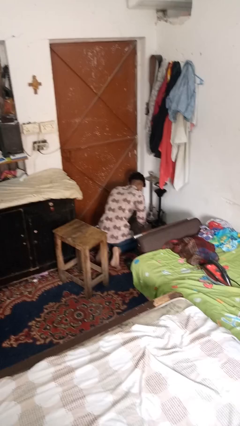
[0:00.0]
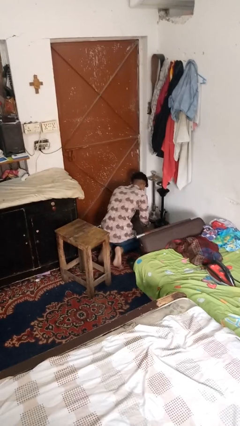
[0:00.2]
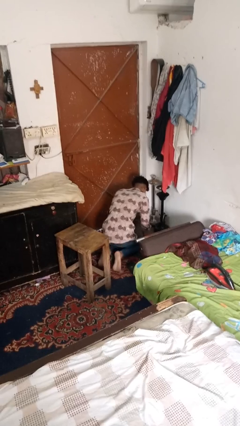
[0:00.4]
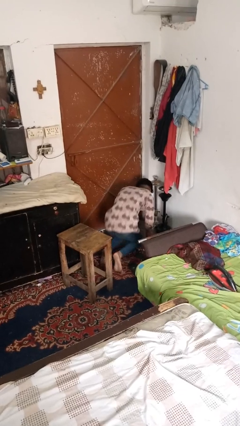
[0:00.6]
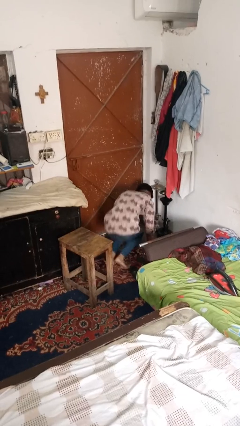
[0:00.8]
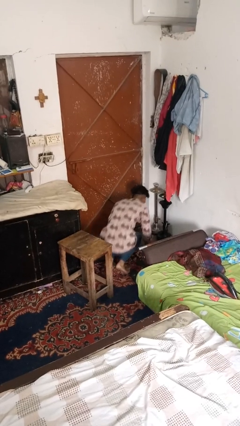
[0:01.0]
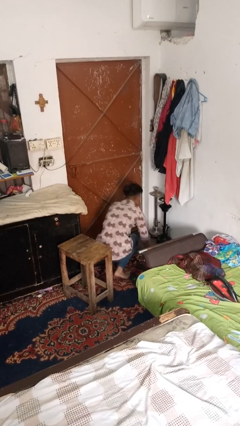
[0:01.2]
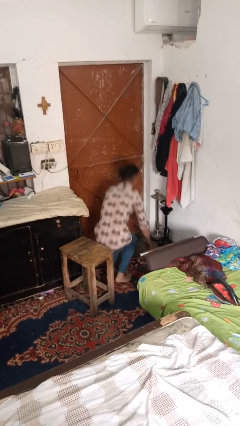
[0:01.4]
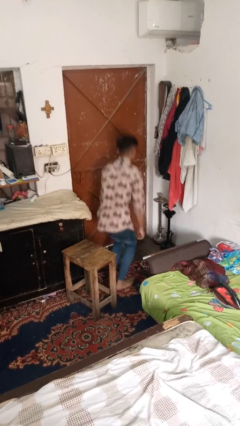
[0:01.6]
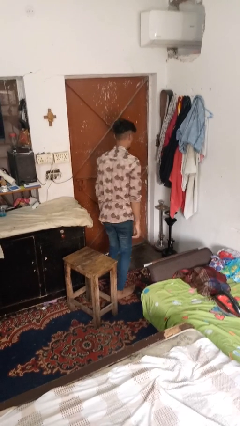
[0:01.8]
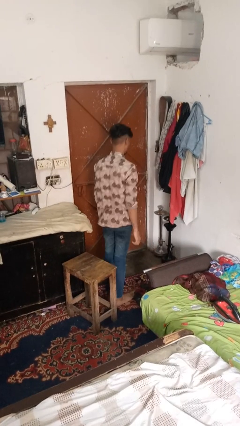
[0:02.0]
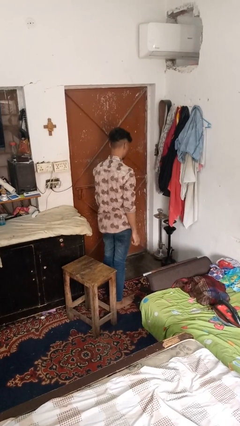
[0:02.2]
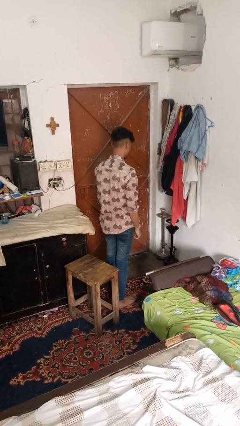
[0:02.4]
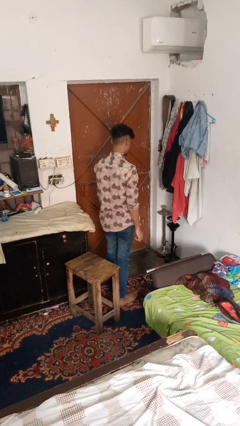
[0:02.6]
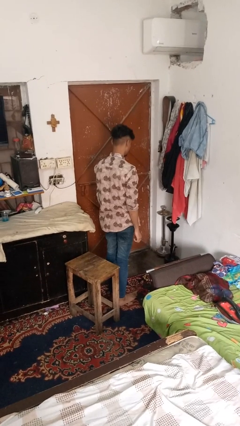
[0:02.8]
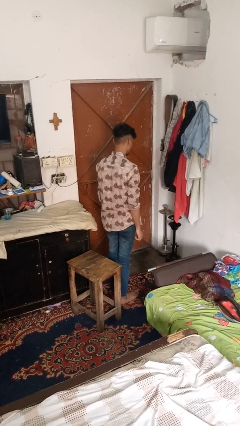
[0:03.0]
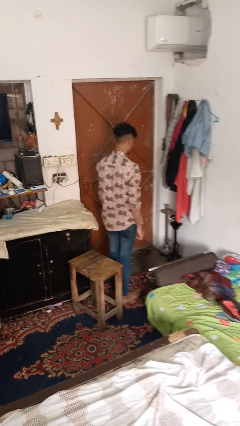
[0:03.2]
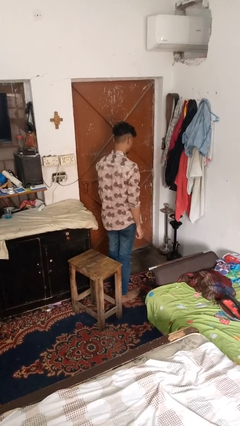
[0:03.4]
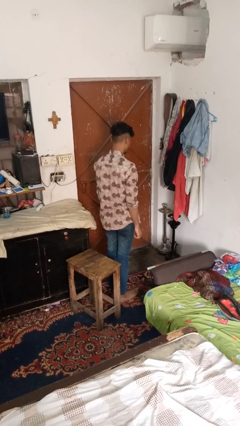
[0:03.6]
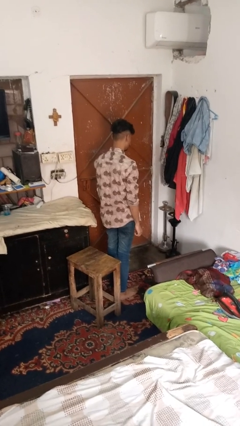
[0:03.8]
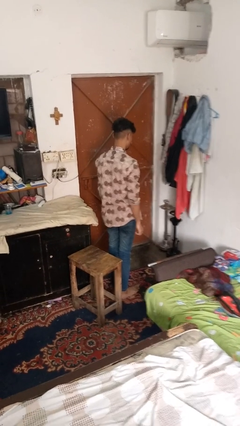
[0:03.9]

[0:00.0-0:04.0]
person stands up from floor

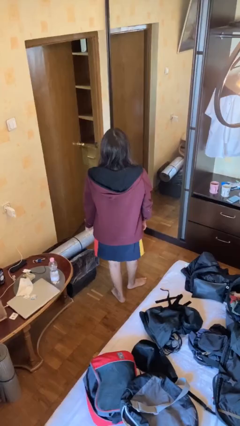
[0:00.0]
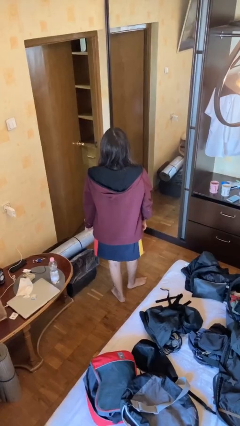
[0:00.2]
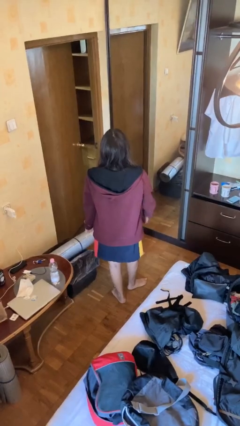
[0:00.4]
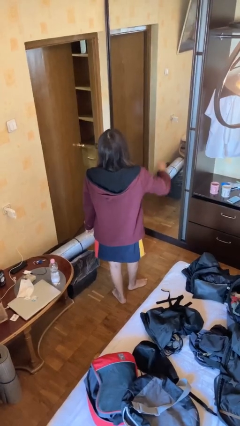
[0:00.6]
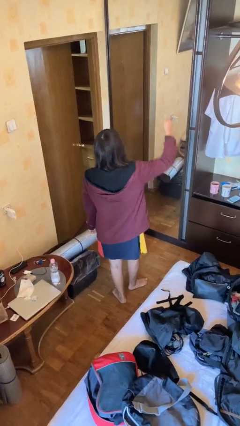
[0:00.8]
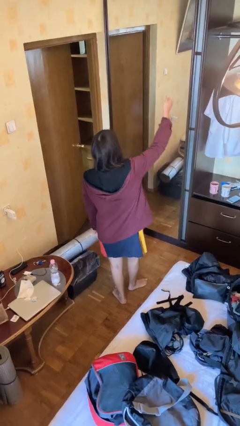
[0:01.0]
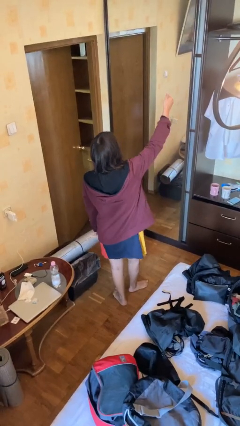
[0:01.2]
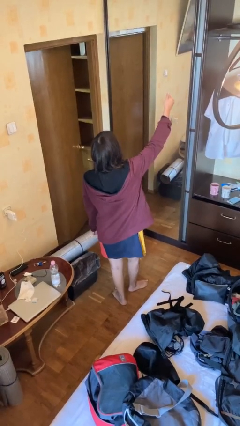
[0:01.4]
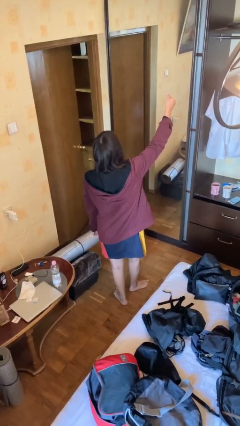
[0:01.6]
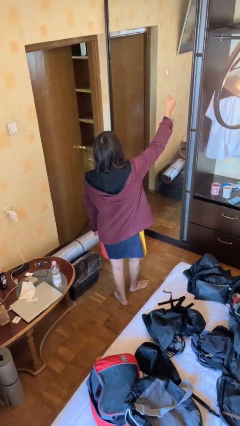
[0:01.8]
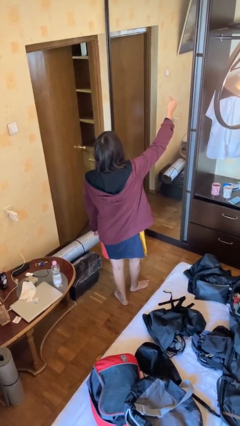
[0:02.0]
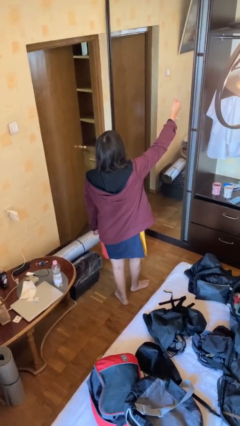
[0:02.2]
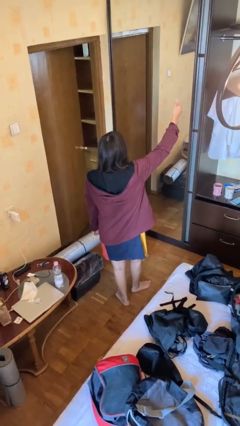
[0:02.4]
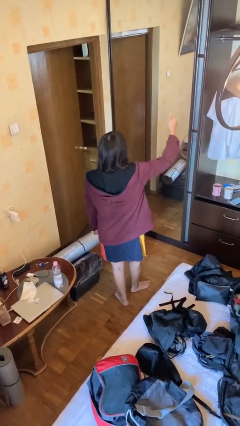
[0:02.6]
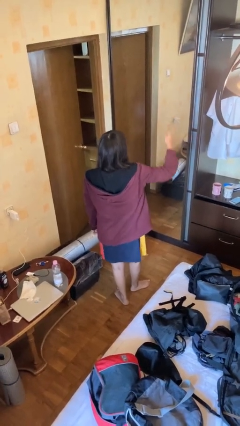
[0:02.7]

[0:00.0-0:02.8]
person gestures thumbs up

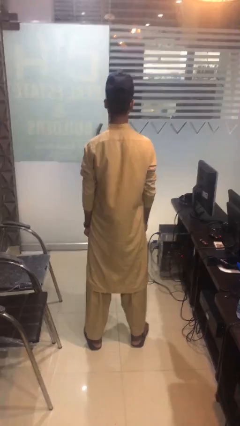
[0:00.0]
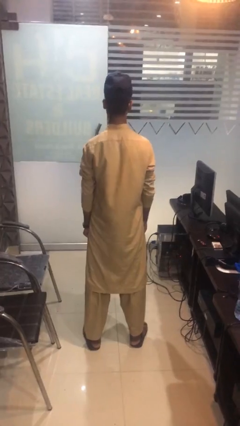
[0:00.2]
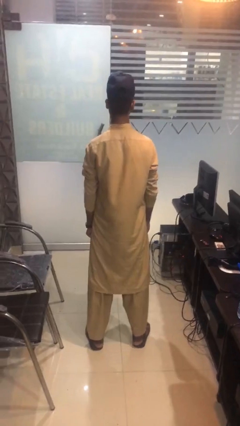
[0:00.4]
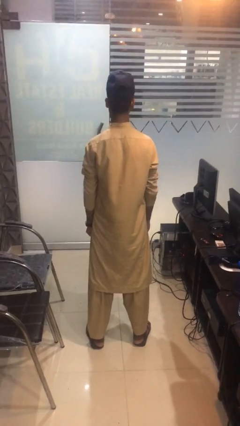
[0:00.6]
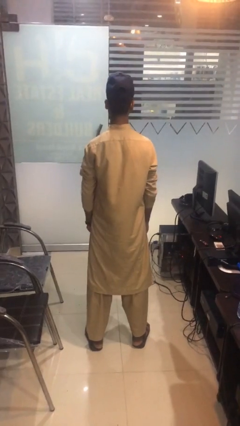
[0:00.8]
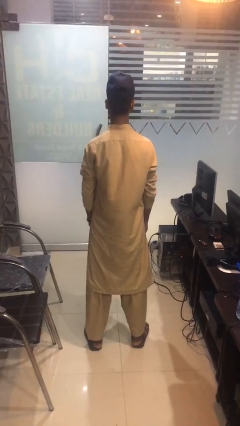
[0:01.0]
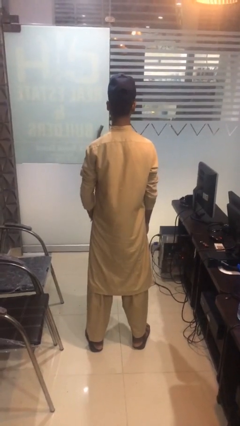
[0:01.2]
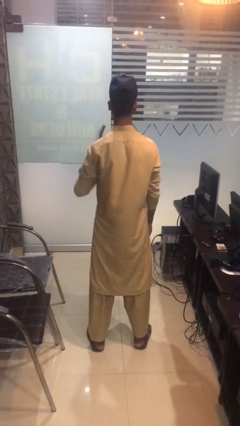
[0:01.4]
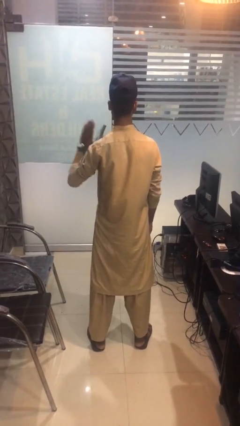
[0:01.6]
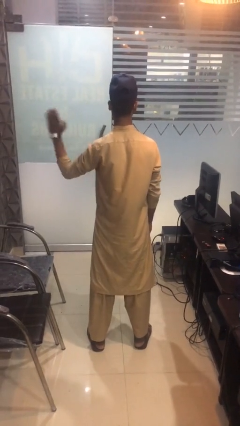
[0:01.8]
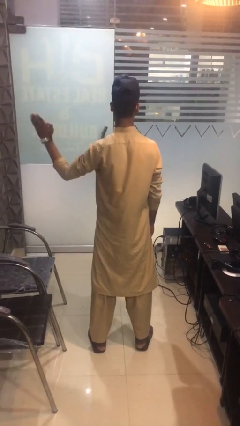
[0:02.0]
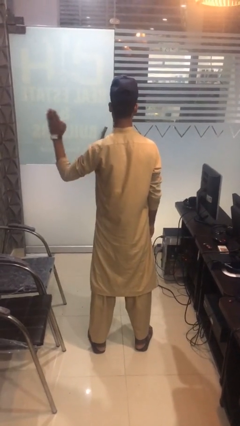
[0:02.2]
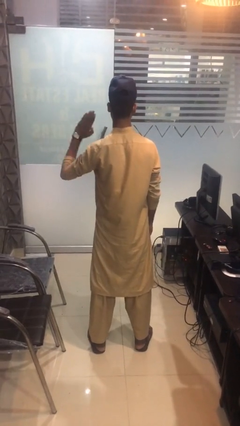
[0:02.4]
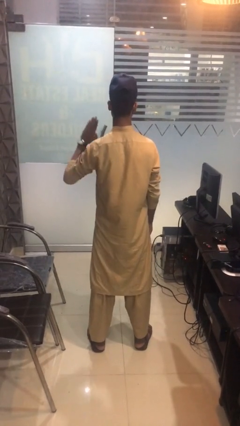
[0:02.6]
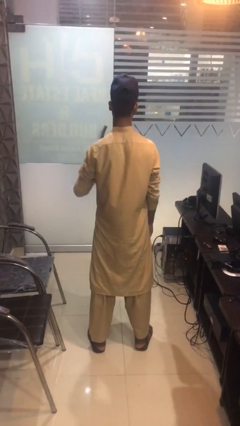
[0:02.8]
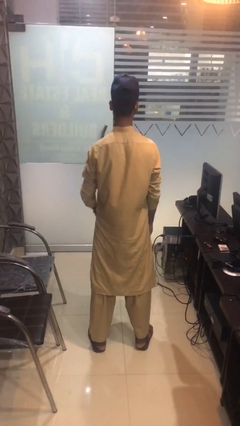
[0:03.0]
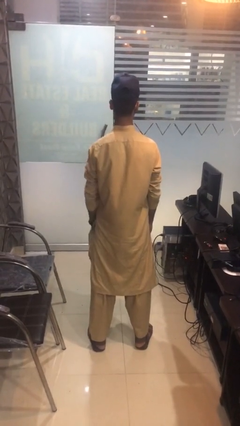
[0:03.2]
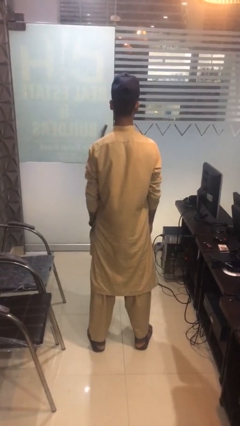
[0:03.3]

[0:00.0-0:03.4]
person gestures swipe left

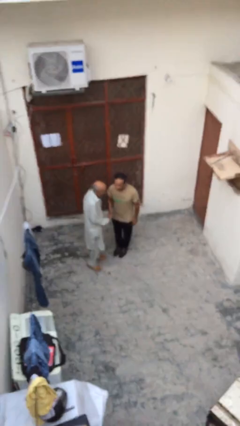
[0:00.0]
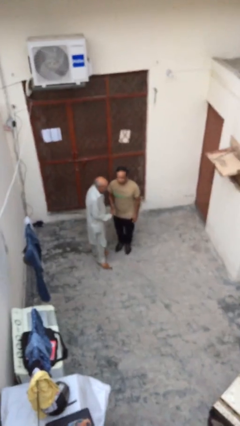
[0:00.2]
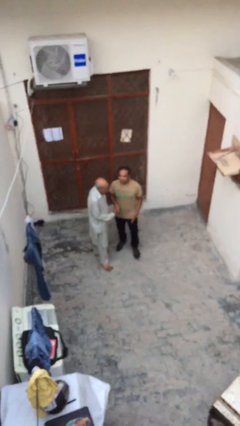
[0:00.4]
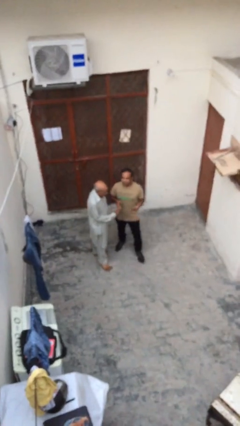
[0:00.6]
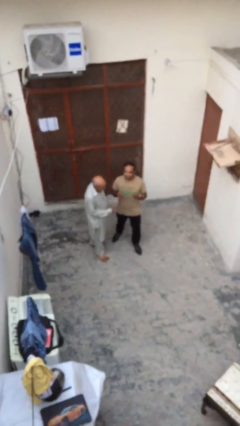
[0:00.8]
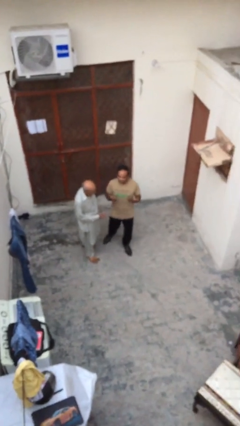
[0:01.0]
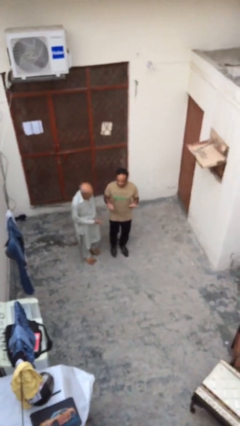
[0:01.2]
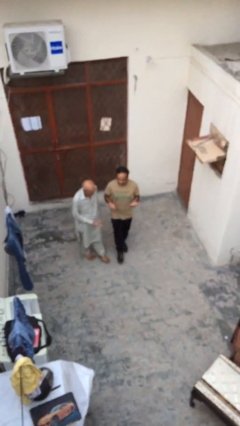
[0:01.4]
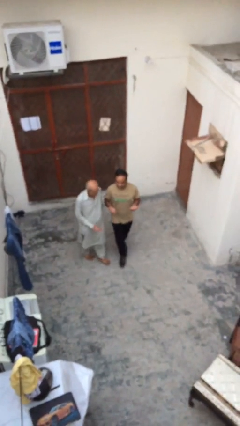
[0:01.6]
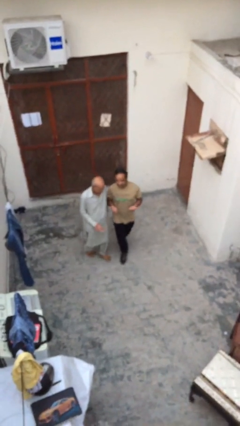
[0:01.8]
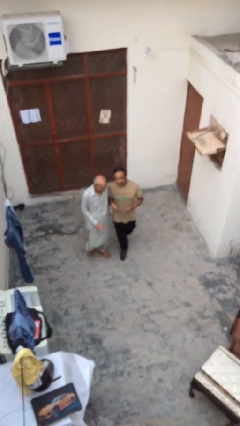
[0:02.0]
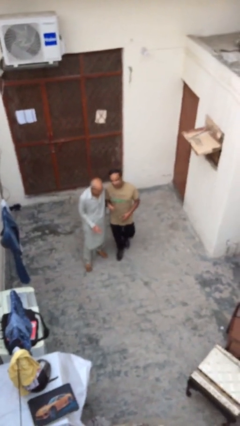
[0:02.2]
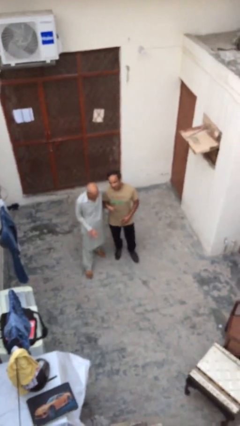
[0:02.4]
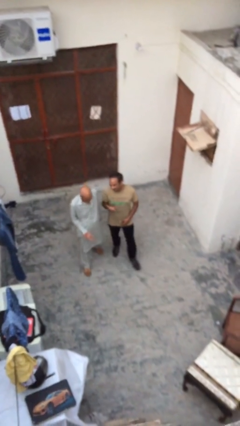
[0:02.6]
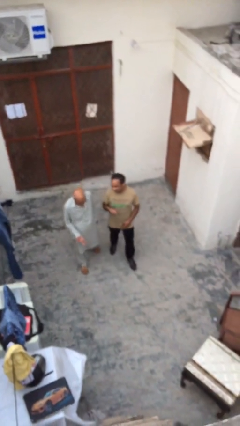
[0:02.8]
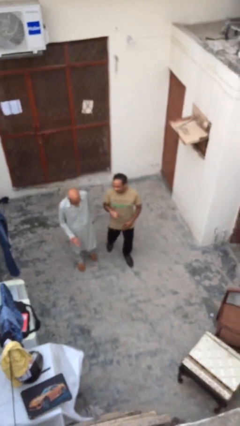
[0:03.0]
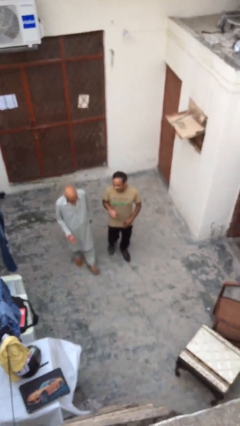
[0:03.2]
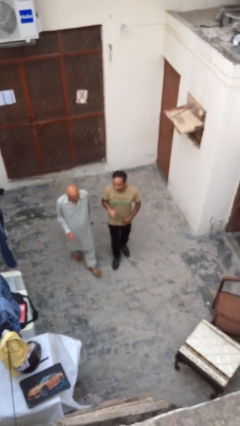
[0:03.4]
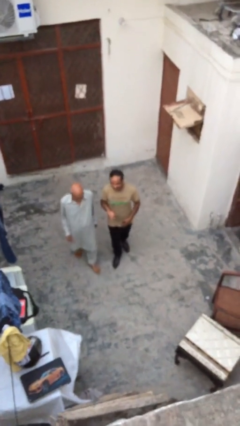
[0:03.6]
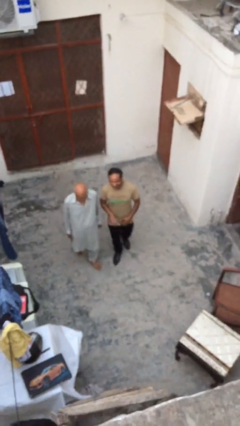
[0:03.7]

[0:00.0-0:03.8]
person talks to person

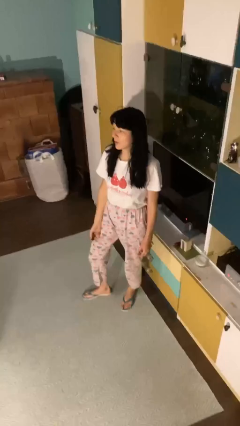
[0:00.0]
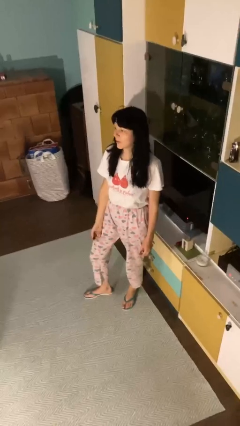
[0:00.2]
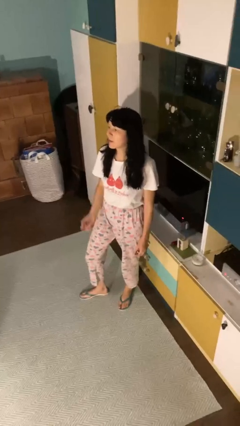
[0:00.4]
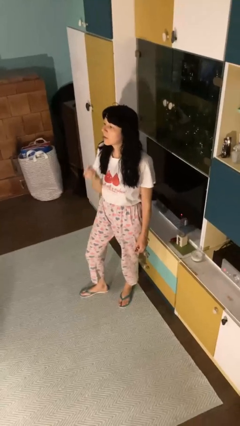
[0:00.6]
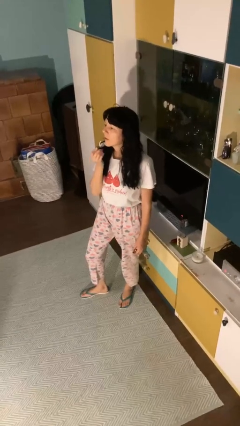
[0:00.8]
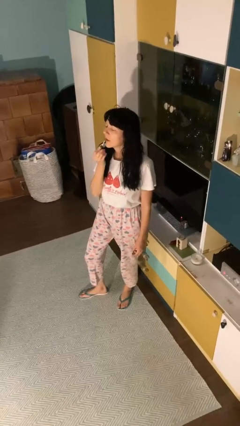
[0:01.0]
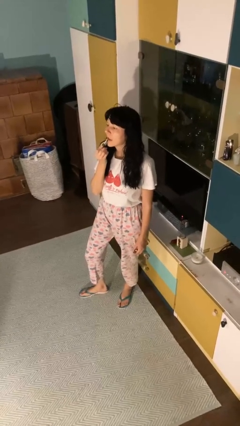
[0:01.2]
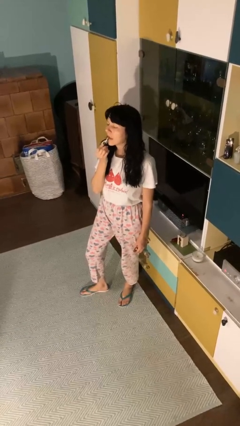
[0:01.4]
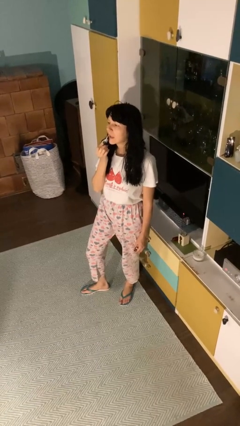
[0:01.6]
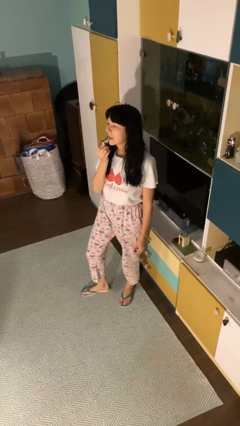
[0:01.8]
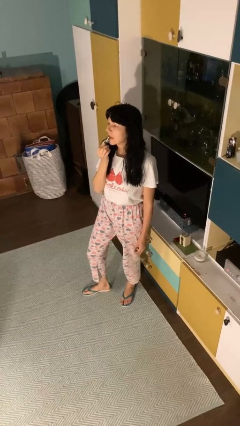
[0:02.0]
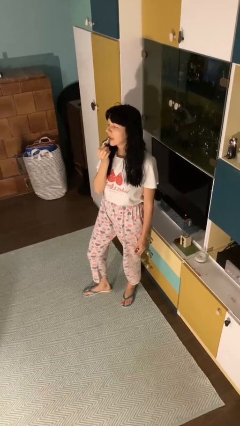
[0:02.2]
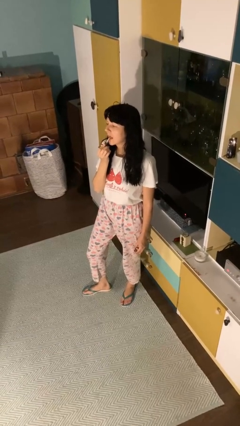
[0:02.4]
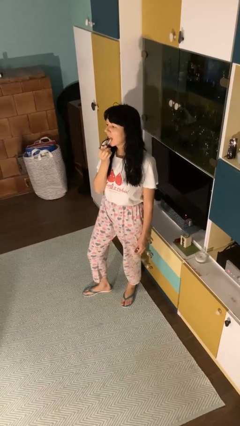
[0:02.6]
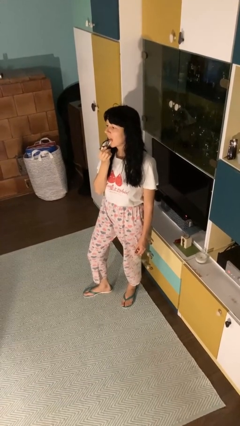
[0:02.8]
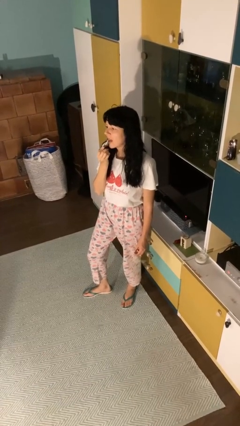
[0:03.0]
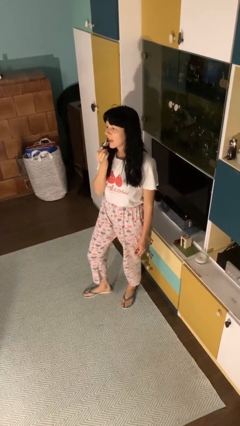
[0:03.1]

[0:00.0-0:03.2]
person applies lip makeup

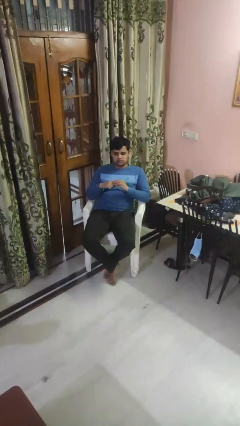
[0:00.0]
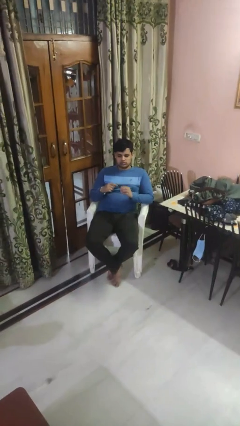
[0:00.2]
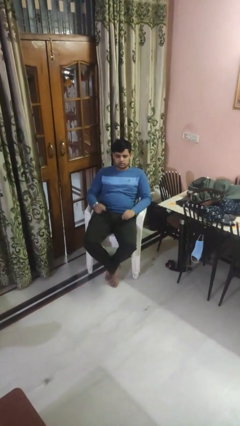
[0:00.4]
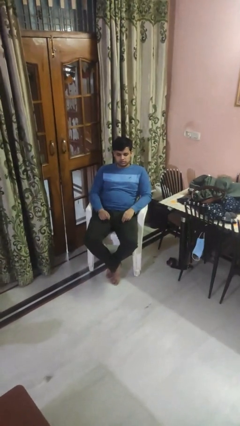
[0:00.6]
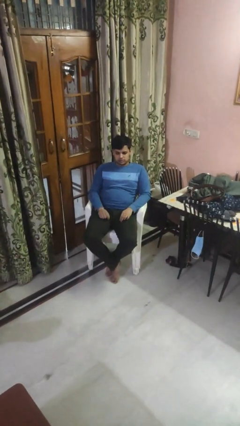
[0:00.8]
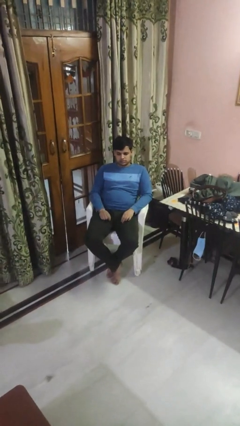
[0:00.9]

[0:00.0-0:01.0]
person takes off ring
